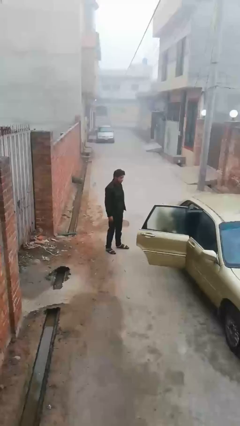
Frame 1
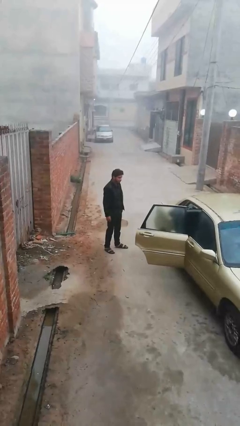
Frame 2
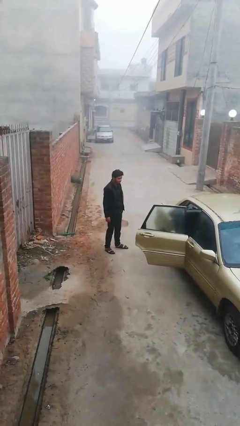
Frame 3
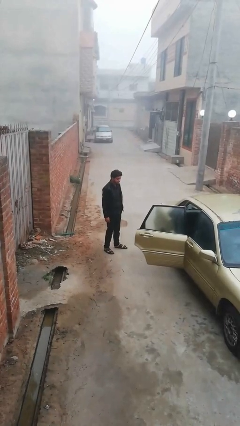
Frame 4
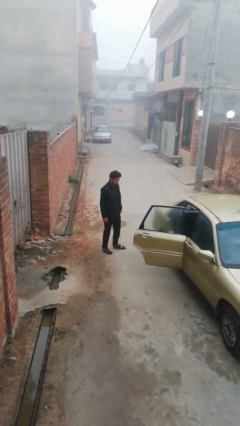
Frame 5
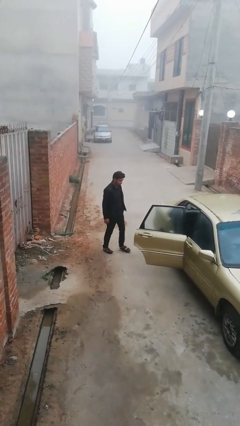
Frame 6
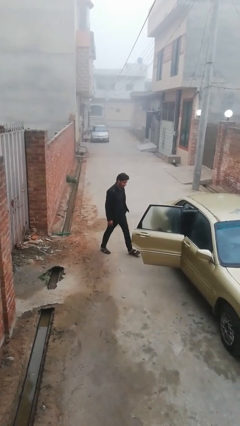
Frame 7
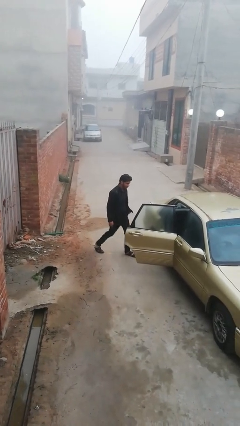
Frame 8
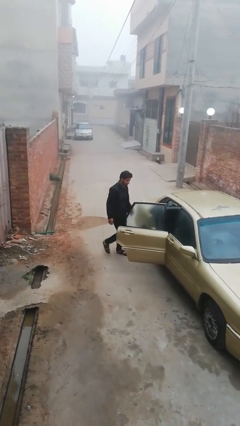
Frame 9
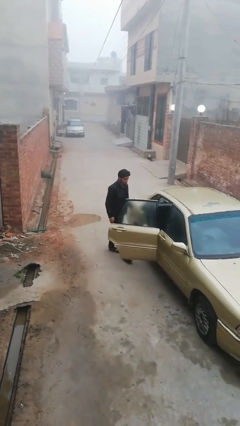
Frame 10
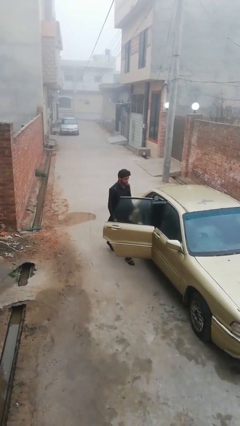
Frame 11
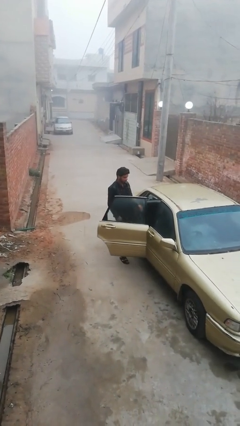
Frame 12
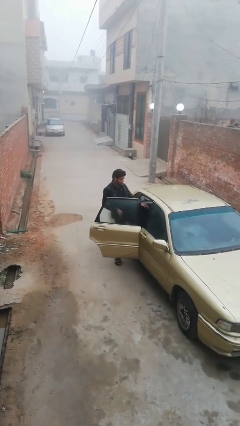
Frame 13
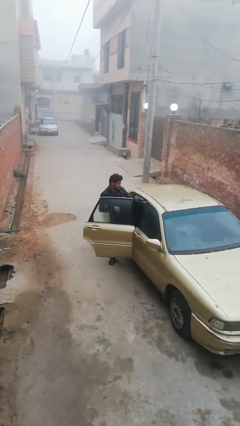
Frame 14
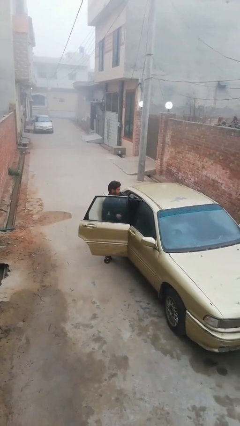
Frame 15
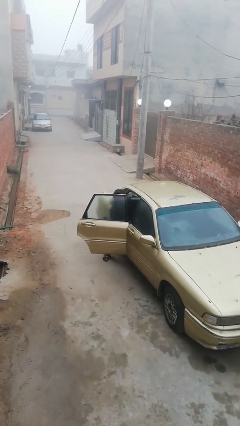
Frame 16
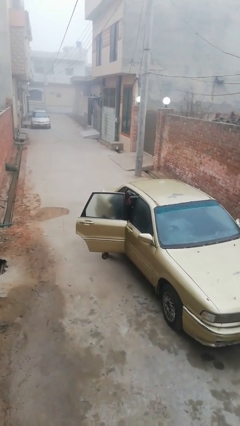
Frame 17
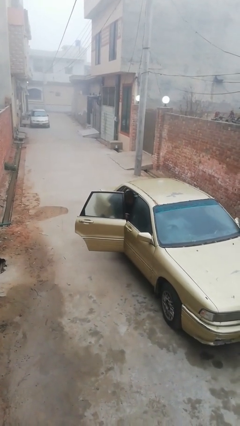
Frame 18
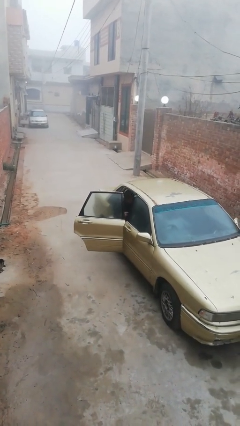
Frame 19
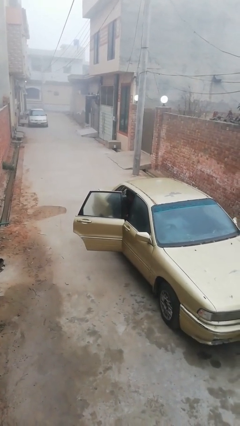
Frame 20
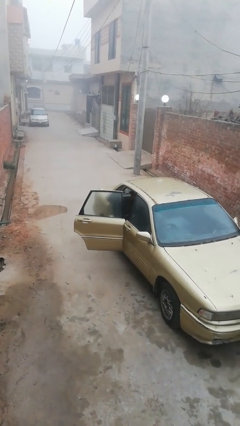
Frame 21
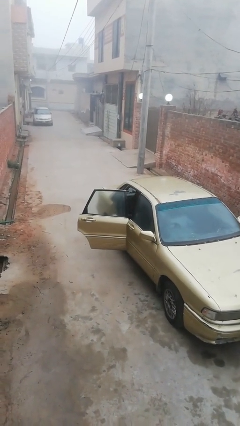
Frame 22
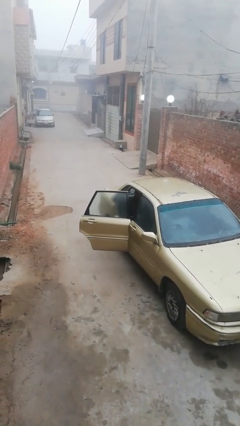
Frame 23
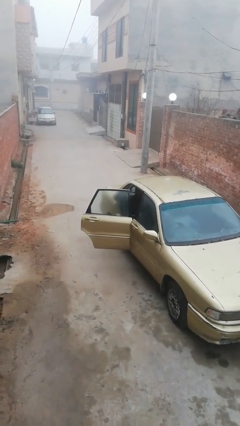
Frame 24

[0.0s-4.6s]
person enters car

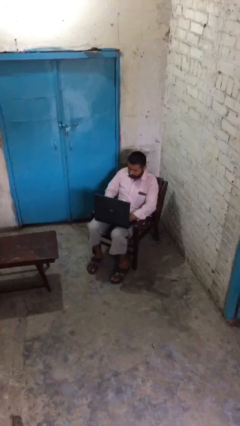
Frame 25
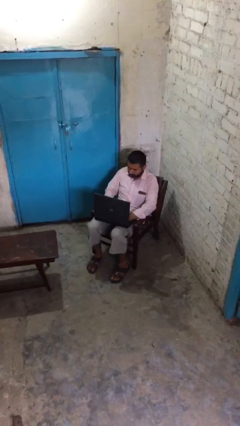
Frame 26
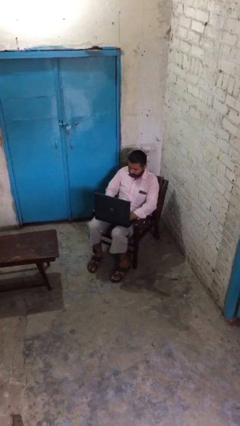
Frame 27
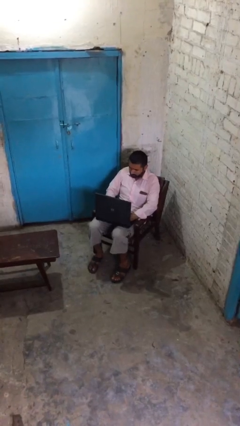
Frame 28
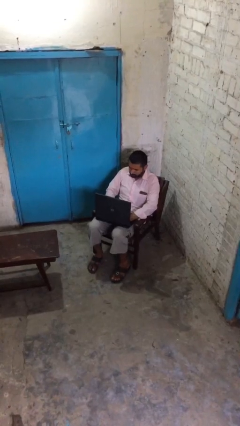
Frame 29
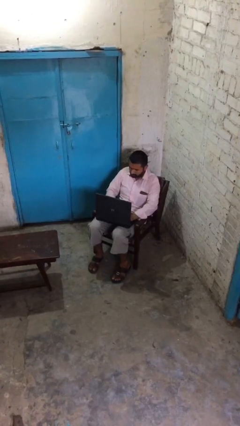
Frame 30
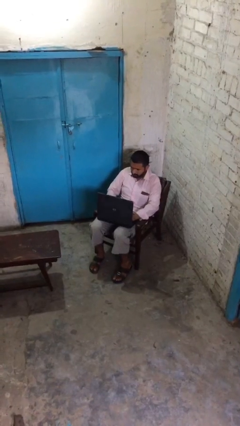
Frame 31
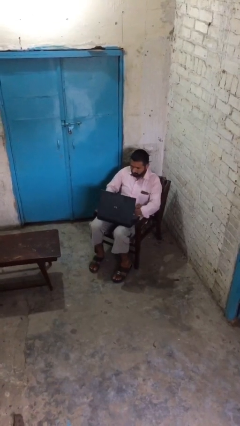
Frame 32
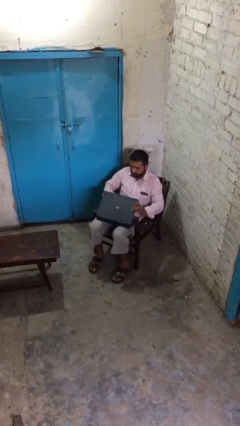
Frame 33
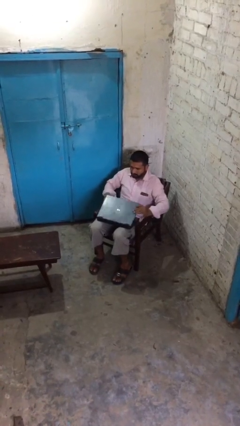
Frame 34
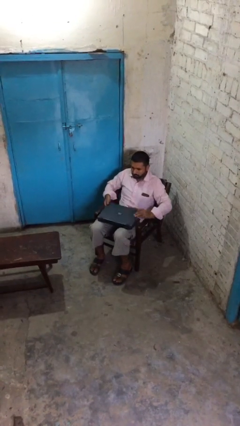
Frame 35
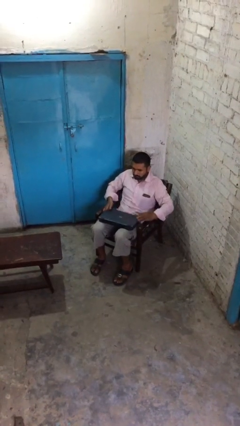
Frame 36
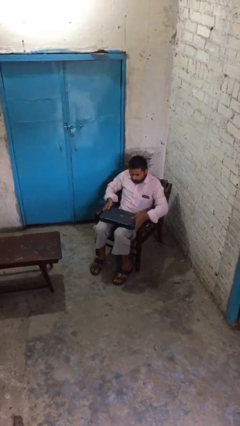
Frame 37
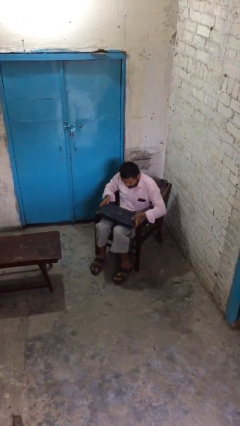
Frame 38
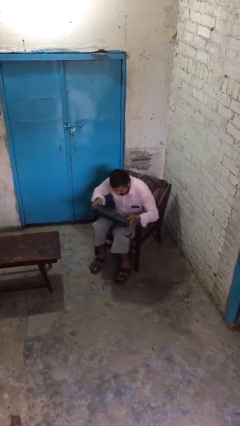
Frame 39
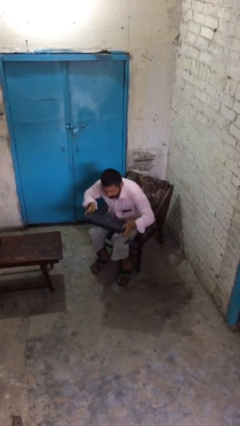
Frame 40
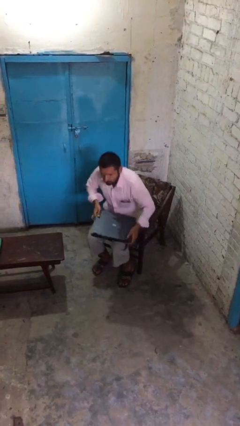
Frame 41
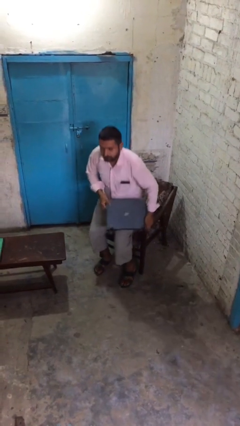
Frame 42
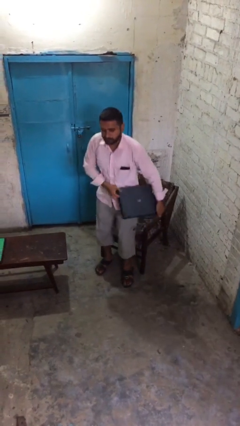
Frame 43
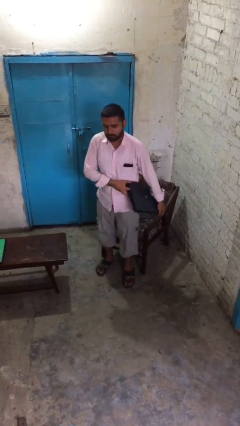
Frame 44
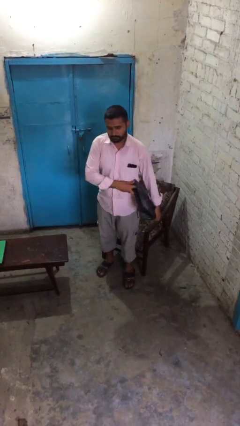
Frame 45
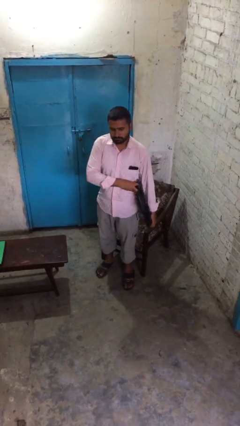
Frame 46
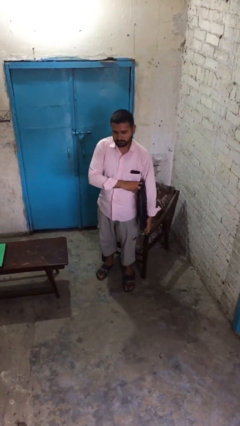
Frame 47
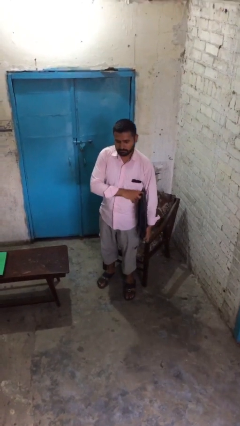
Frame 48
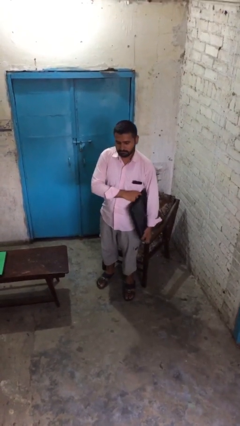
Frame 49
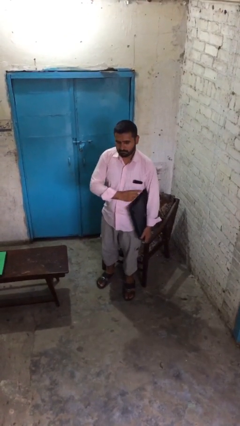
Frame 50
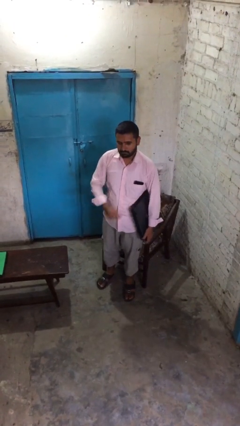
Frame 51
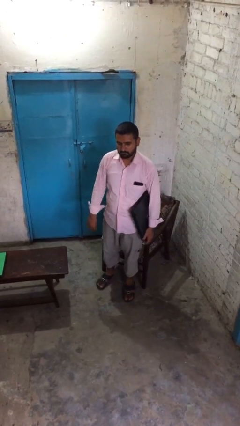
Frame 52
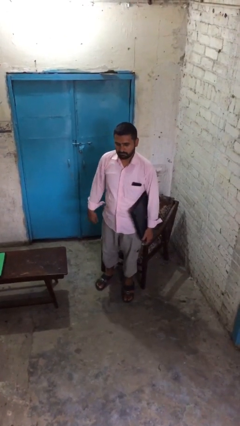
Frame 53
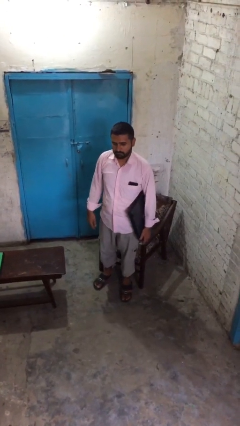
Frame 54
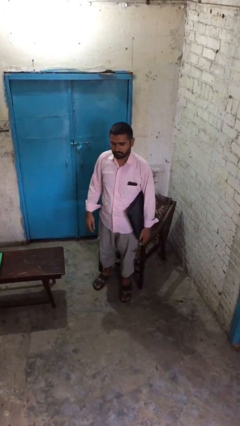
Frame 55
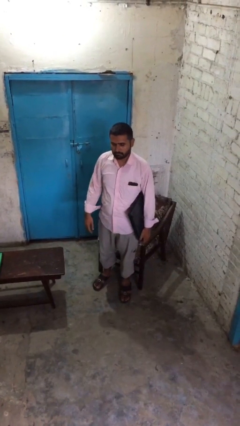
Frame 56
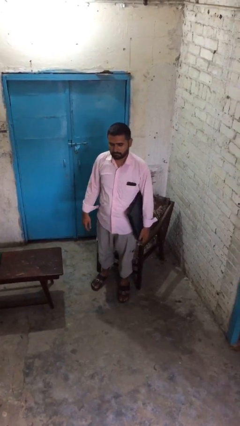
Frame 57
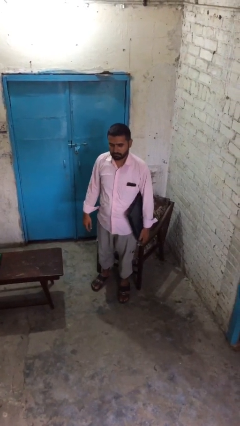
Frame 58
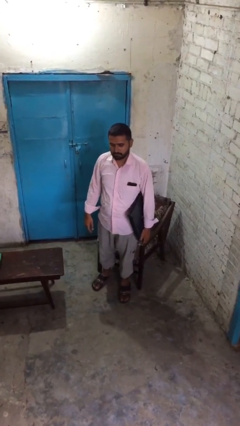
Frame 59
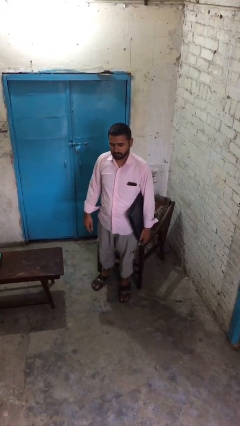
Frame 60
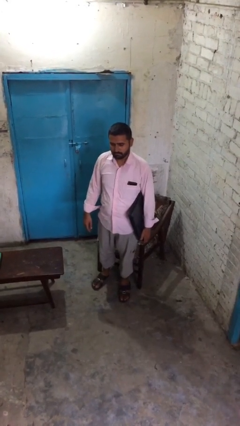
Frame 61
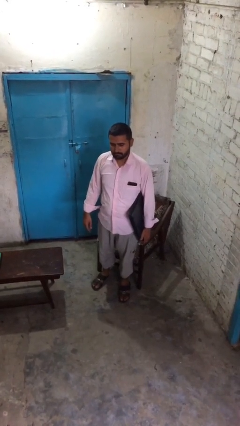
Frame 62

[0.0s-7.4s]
person stands up

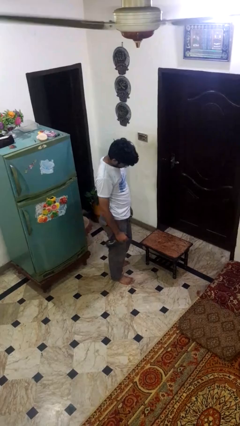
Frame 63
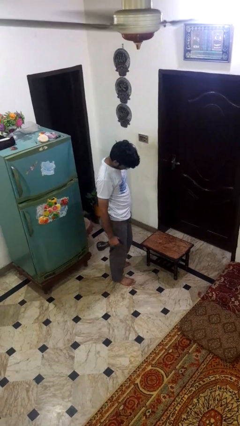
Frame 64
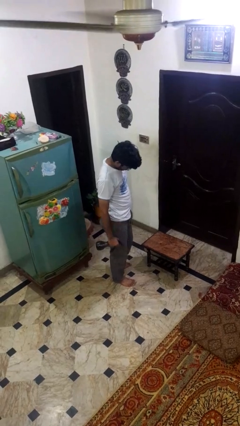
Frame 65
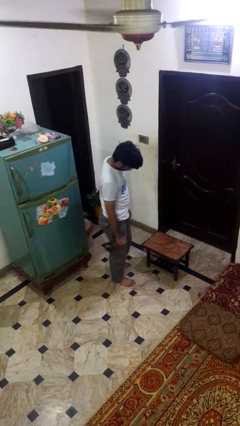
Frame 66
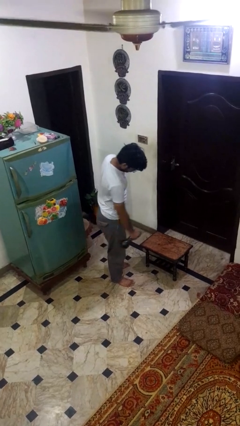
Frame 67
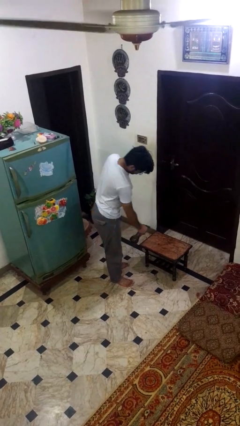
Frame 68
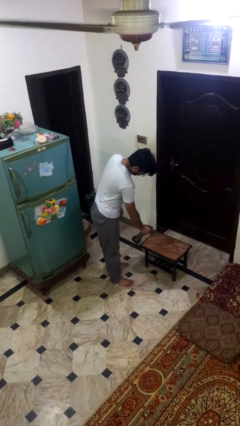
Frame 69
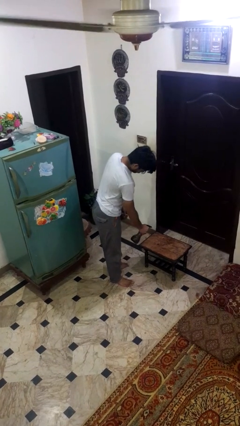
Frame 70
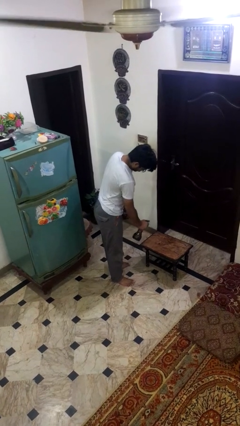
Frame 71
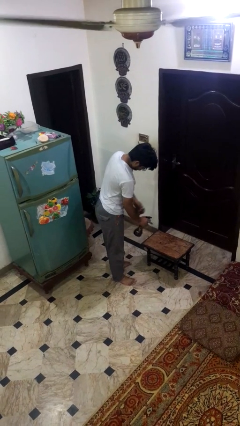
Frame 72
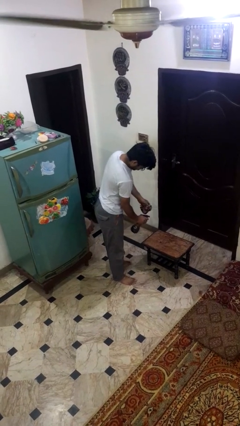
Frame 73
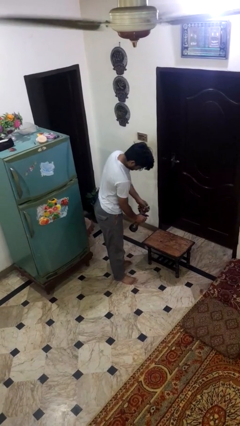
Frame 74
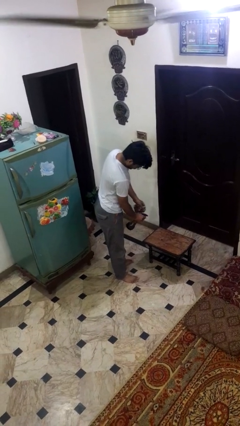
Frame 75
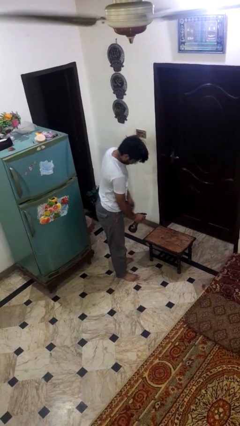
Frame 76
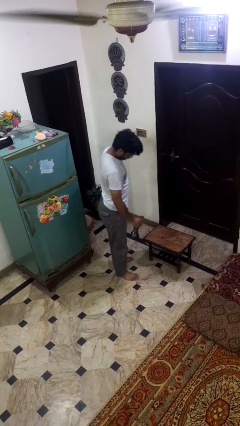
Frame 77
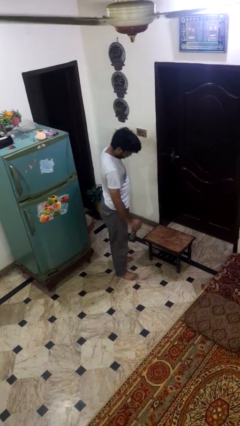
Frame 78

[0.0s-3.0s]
person sprays from bottle

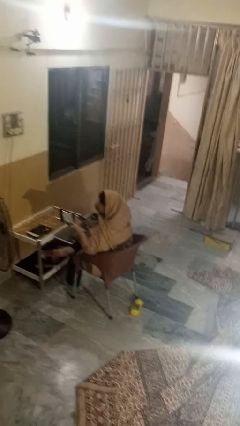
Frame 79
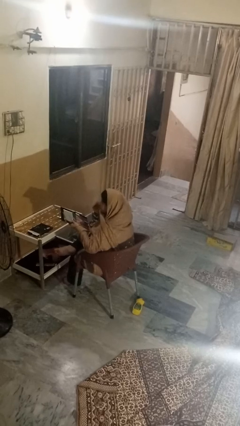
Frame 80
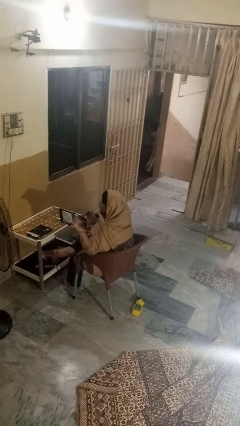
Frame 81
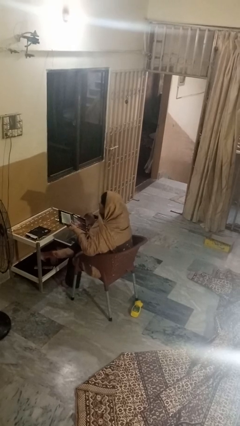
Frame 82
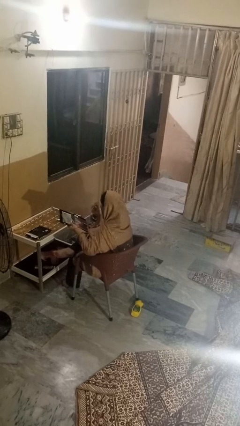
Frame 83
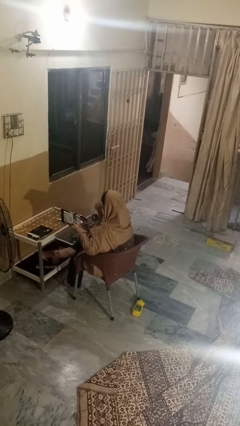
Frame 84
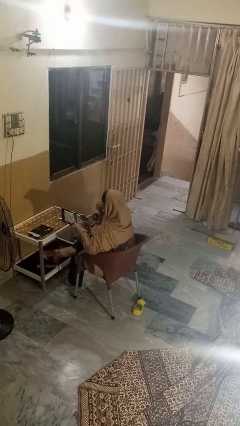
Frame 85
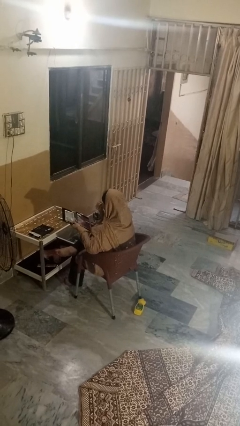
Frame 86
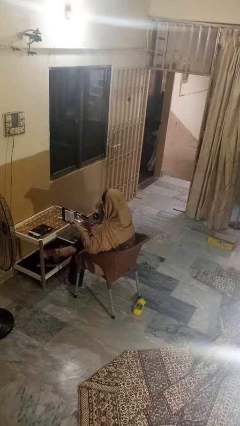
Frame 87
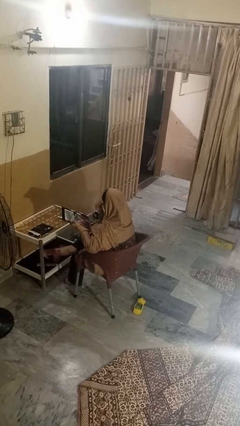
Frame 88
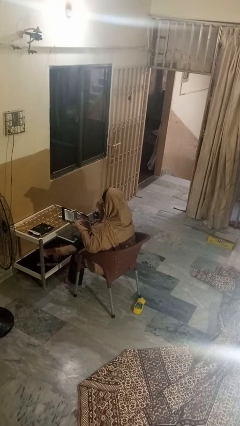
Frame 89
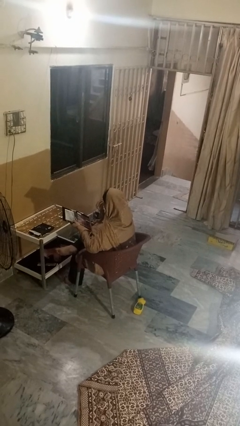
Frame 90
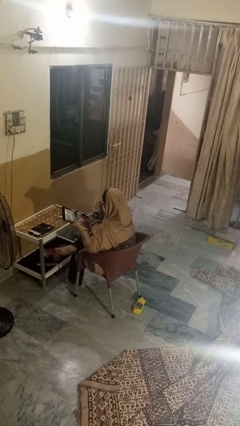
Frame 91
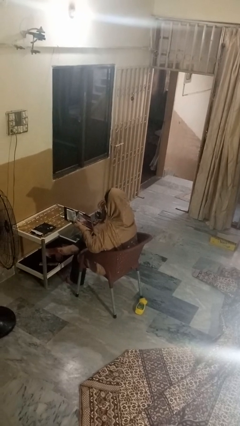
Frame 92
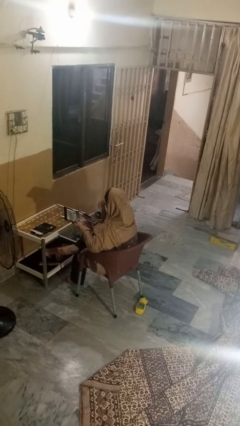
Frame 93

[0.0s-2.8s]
person applies eye makeup
